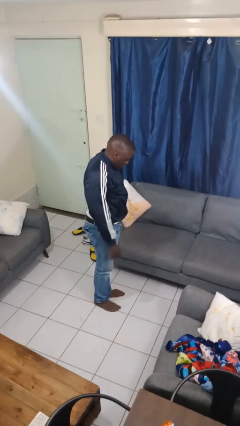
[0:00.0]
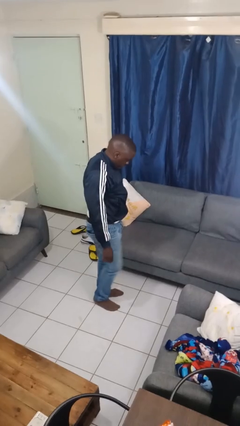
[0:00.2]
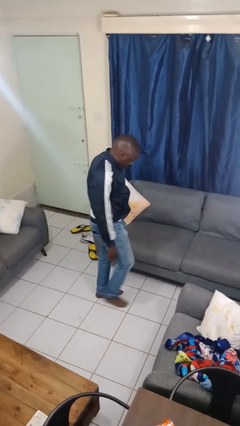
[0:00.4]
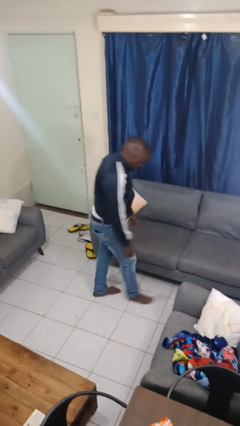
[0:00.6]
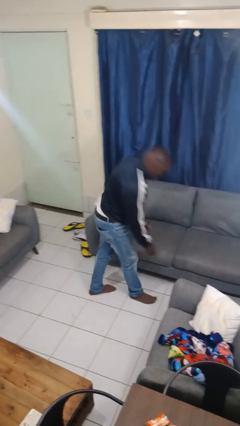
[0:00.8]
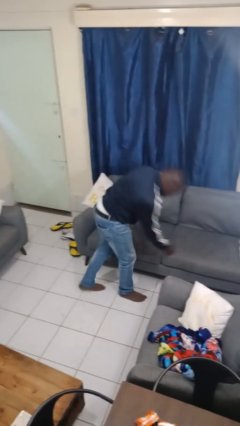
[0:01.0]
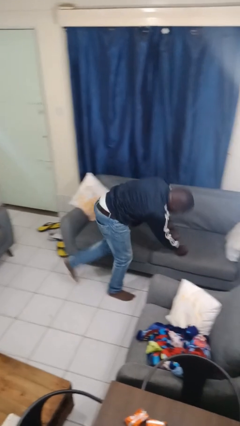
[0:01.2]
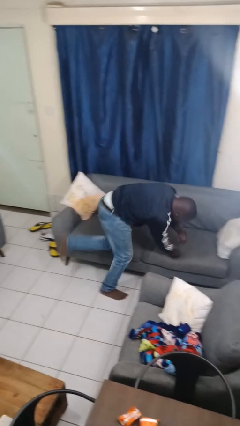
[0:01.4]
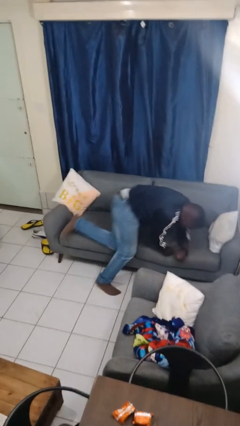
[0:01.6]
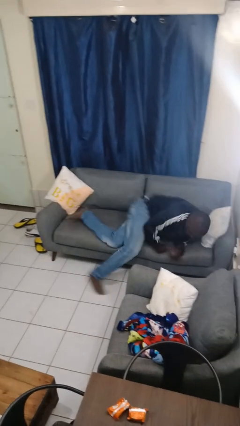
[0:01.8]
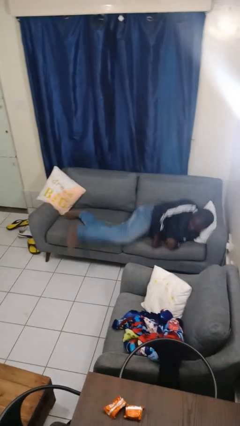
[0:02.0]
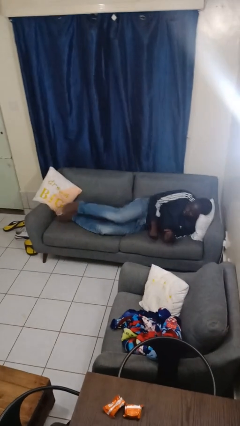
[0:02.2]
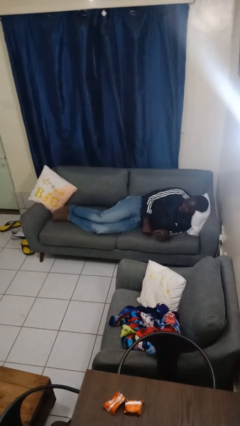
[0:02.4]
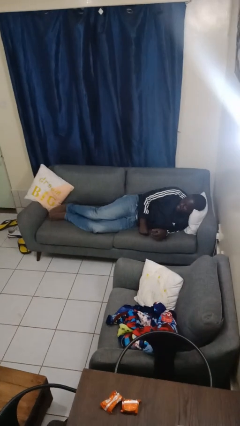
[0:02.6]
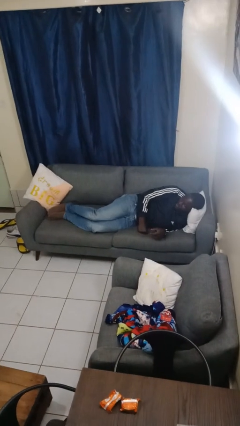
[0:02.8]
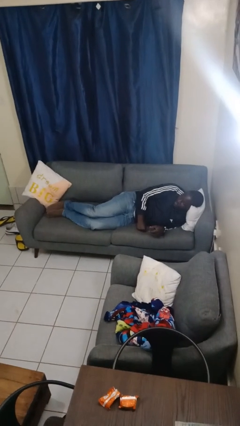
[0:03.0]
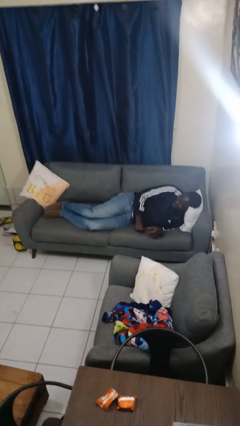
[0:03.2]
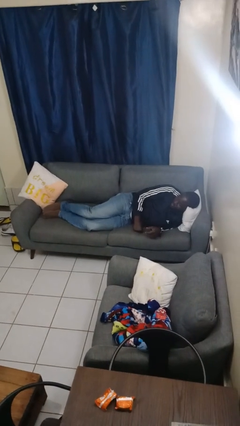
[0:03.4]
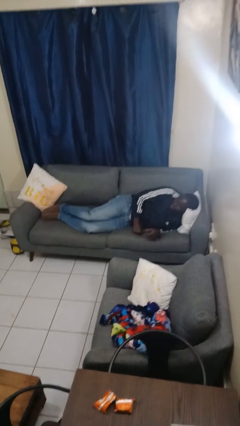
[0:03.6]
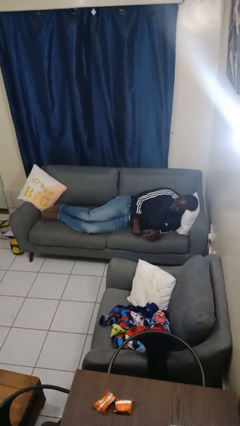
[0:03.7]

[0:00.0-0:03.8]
person lies down on couch

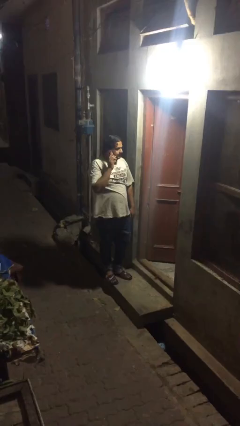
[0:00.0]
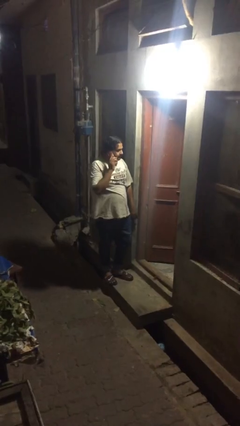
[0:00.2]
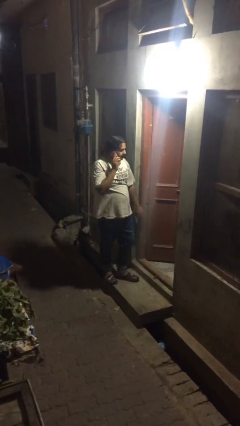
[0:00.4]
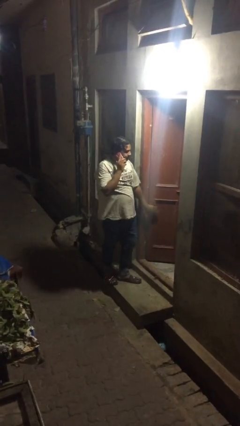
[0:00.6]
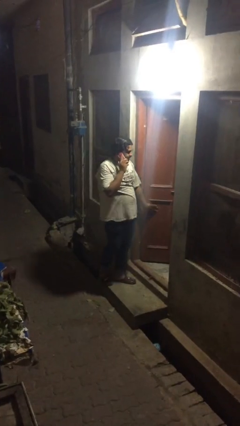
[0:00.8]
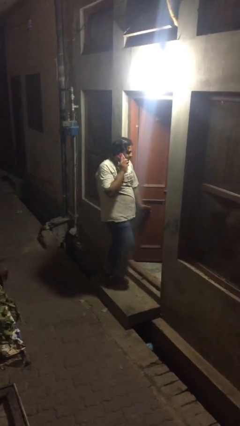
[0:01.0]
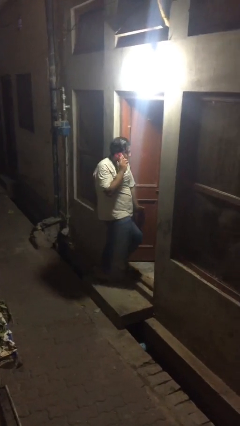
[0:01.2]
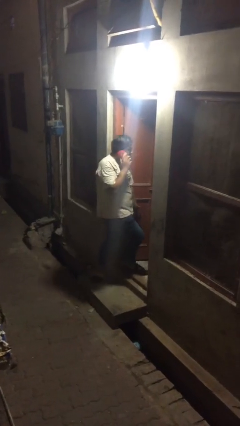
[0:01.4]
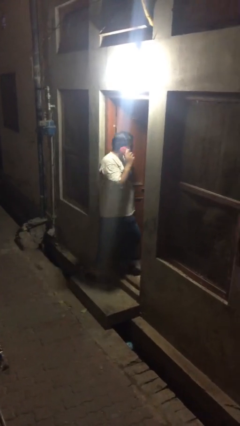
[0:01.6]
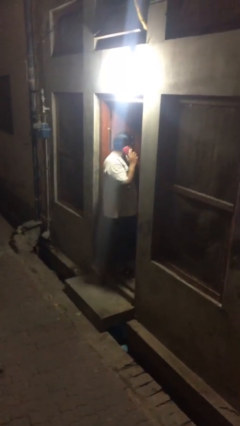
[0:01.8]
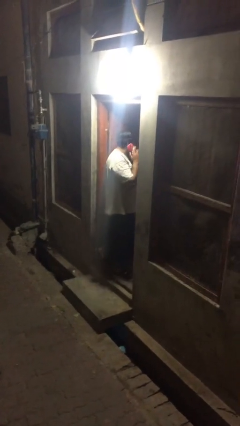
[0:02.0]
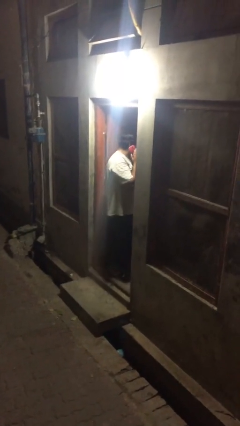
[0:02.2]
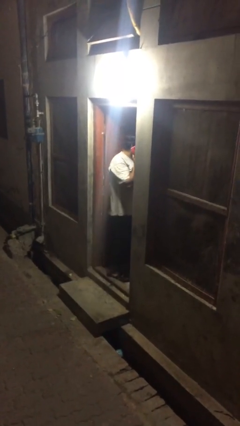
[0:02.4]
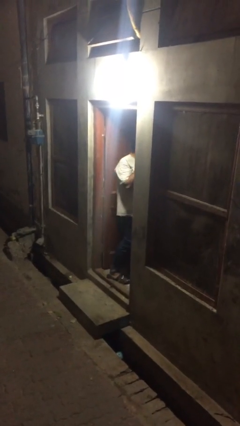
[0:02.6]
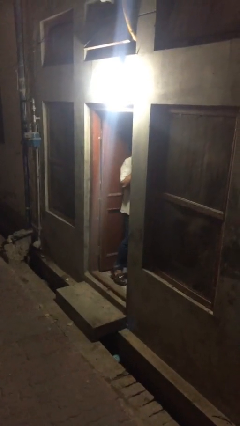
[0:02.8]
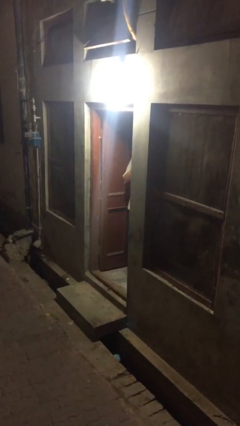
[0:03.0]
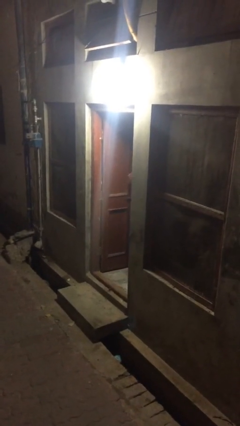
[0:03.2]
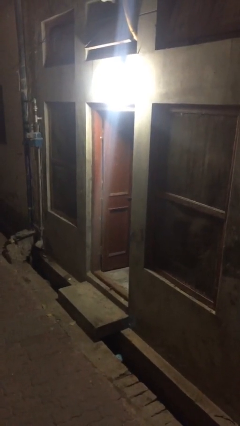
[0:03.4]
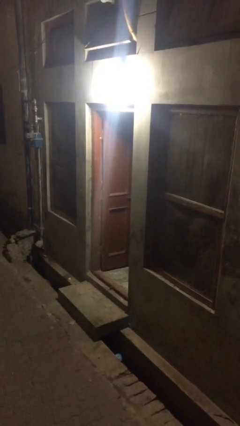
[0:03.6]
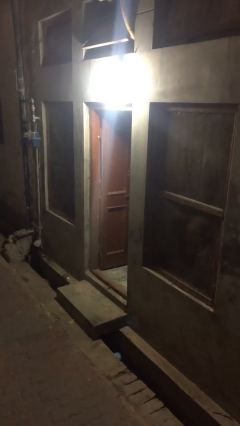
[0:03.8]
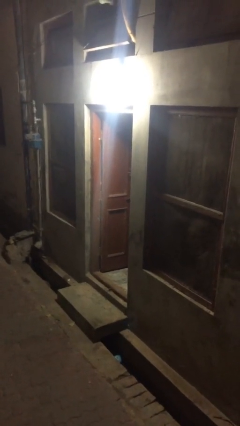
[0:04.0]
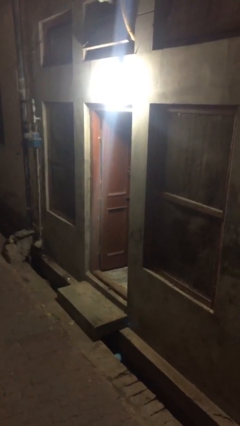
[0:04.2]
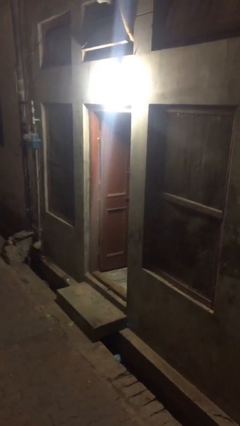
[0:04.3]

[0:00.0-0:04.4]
person exits scene through structure

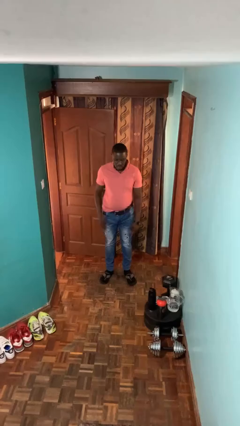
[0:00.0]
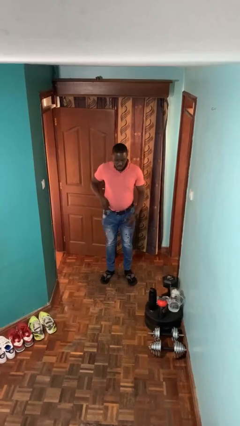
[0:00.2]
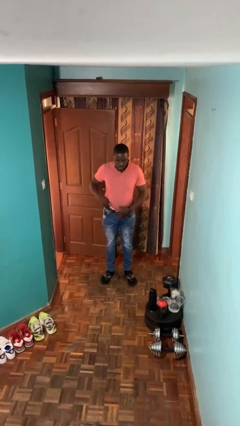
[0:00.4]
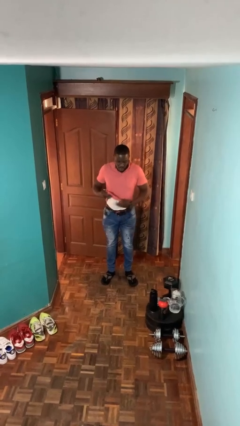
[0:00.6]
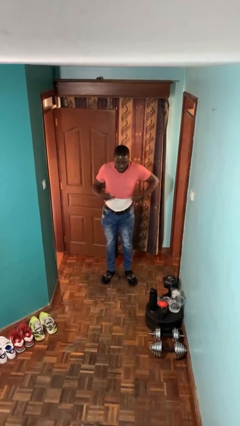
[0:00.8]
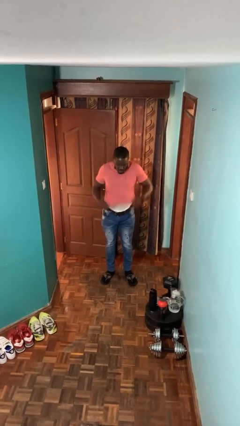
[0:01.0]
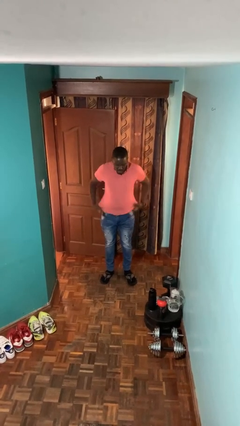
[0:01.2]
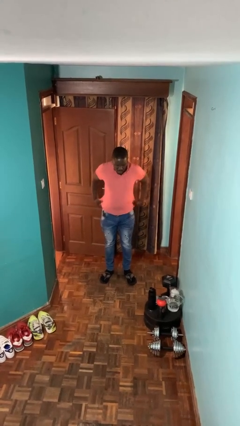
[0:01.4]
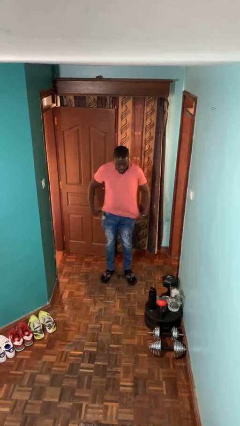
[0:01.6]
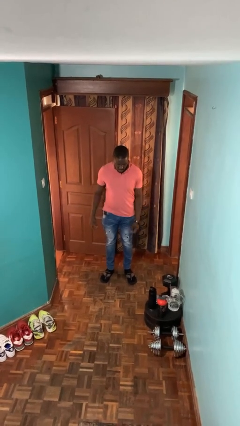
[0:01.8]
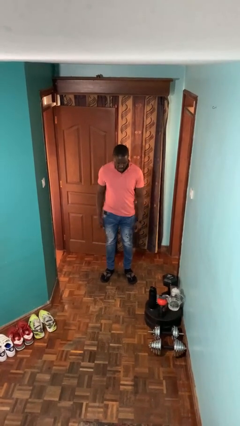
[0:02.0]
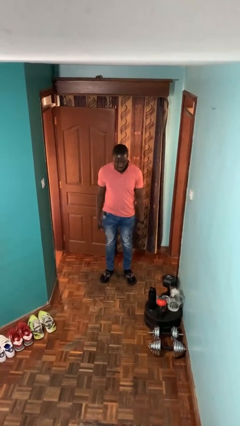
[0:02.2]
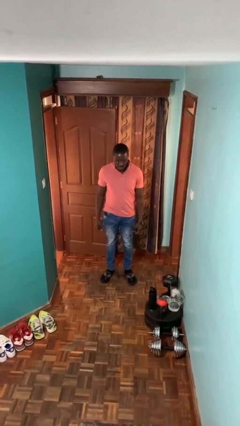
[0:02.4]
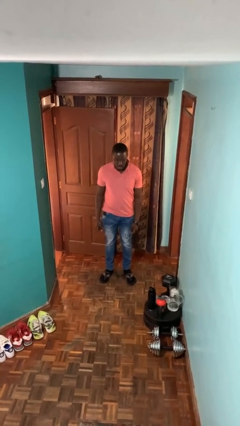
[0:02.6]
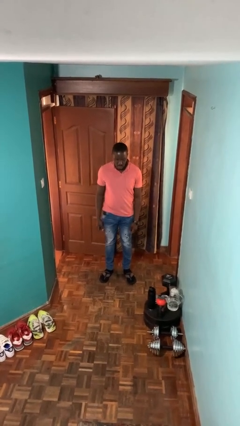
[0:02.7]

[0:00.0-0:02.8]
person untucks shirt

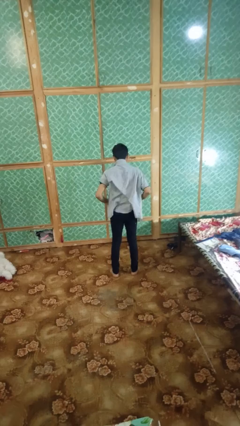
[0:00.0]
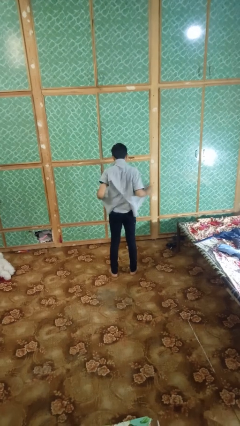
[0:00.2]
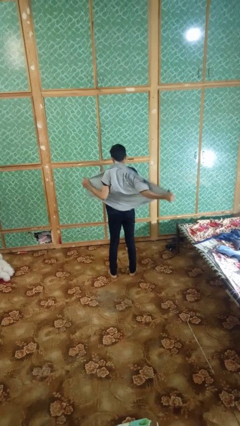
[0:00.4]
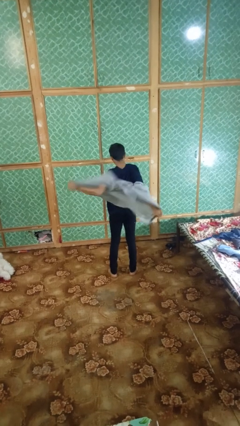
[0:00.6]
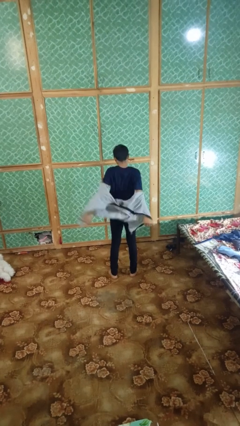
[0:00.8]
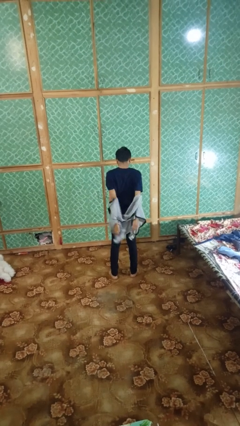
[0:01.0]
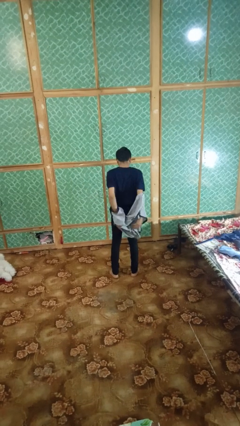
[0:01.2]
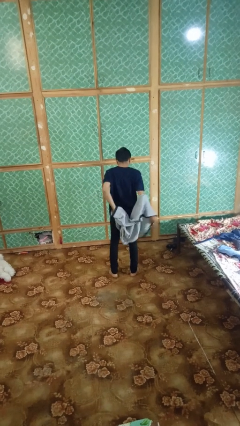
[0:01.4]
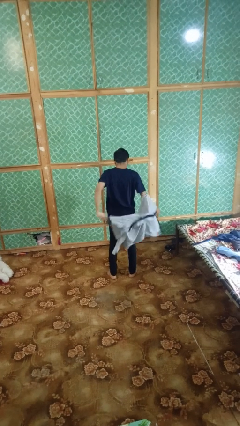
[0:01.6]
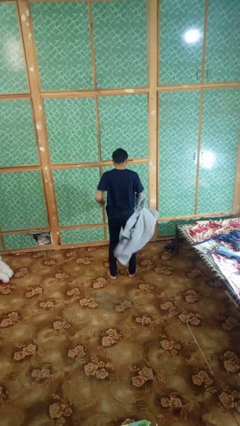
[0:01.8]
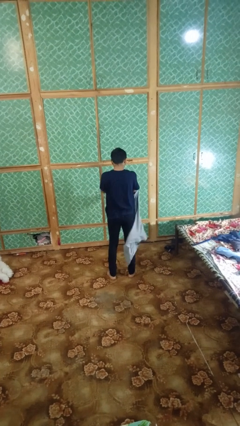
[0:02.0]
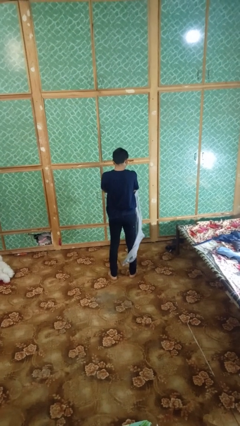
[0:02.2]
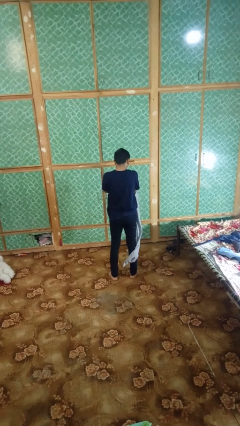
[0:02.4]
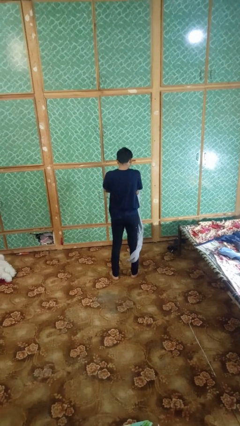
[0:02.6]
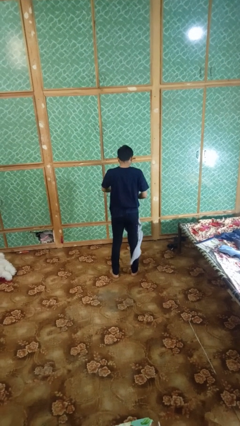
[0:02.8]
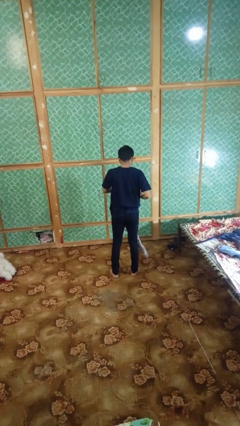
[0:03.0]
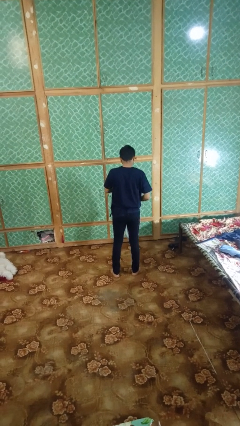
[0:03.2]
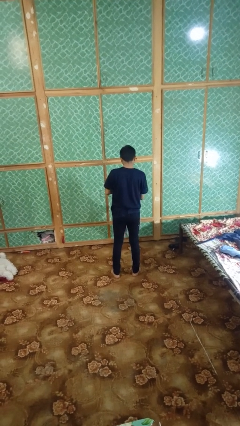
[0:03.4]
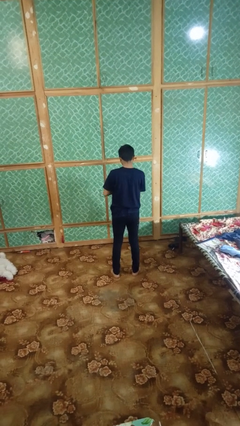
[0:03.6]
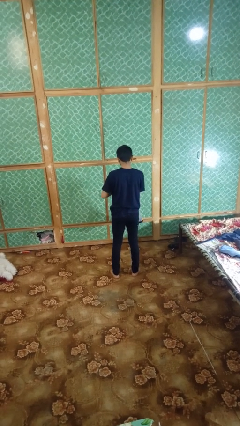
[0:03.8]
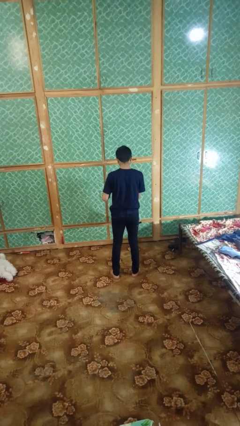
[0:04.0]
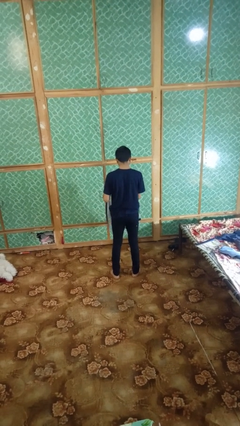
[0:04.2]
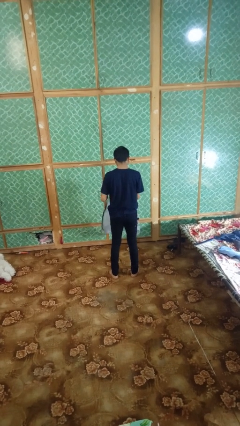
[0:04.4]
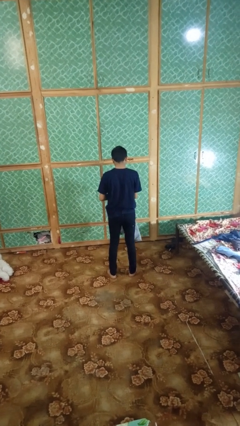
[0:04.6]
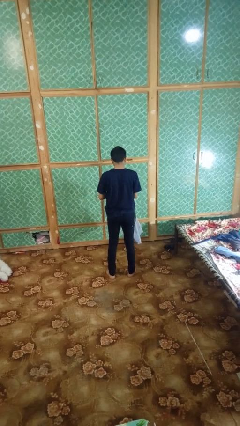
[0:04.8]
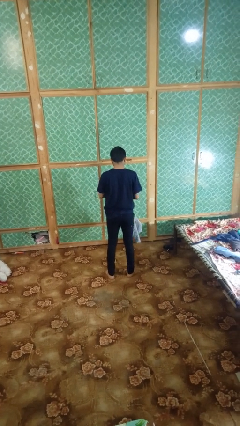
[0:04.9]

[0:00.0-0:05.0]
person takes off shirt

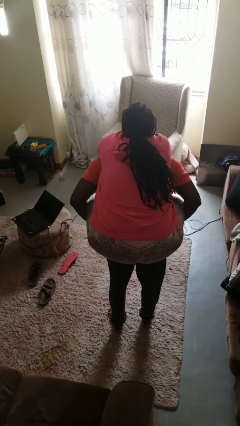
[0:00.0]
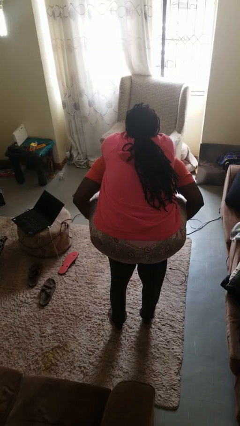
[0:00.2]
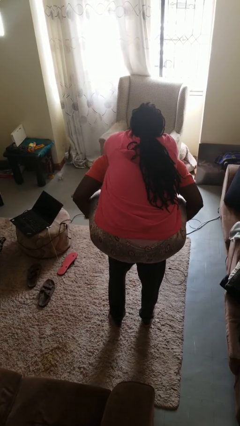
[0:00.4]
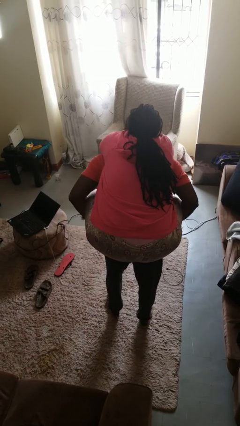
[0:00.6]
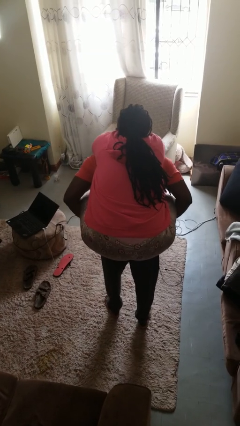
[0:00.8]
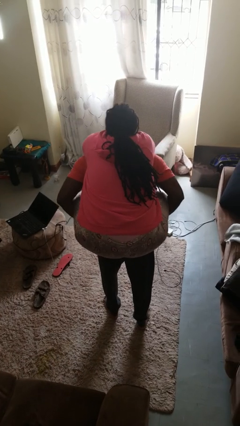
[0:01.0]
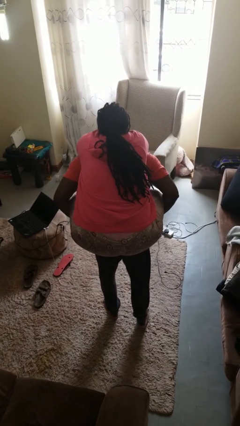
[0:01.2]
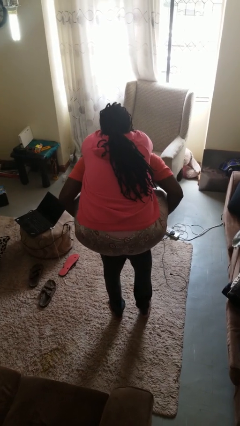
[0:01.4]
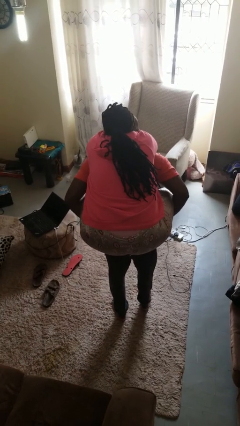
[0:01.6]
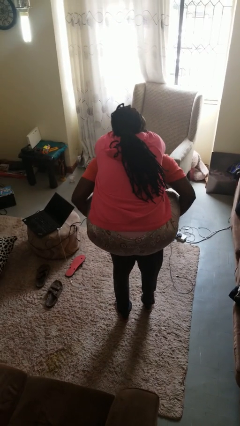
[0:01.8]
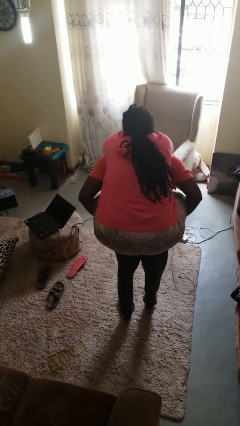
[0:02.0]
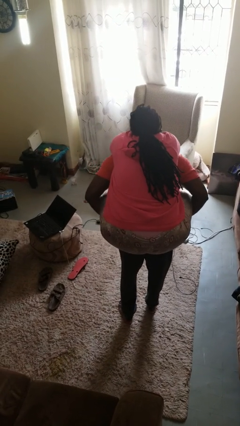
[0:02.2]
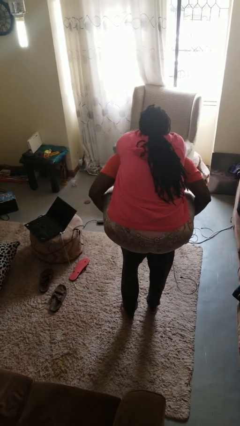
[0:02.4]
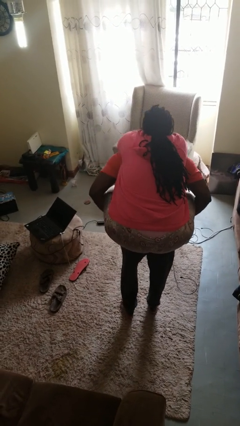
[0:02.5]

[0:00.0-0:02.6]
person carries person on back
